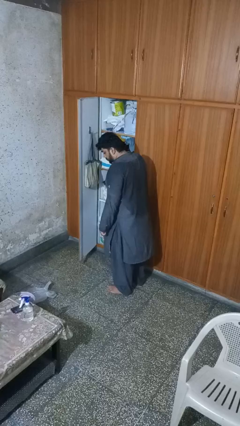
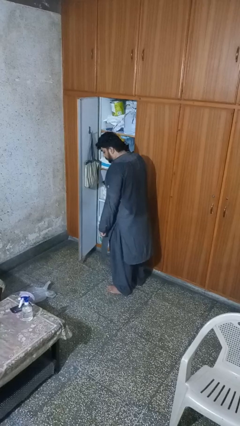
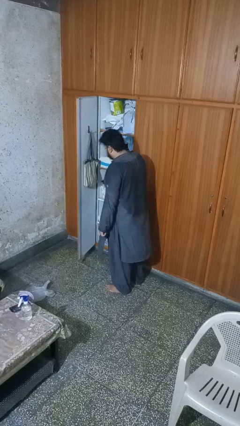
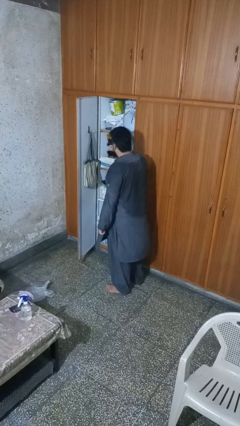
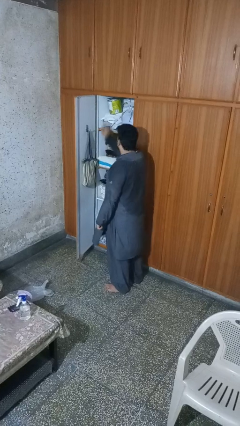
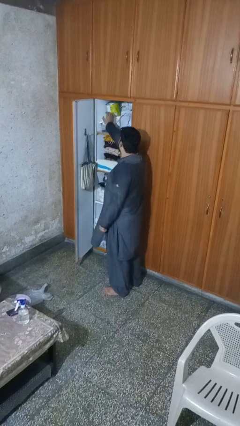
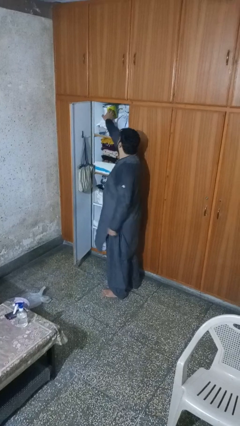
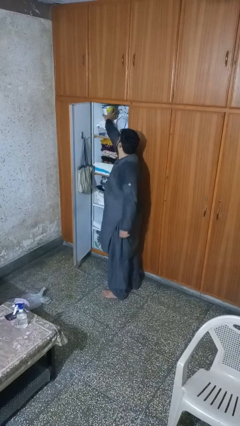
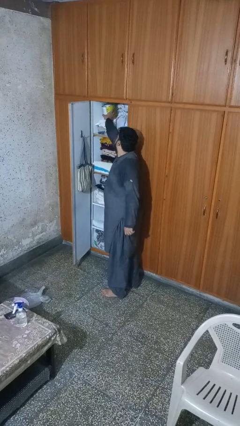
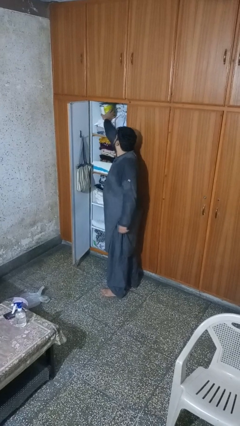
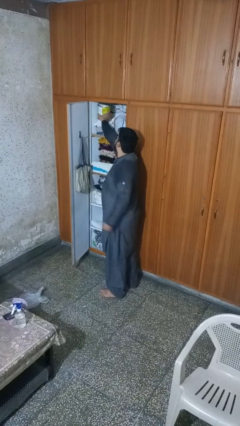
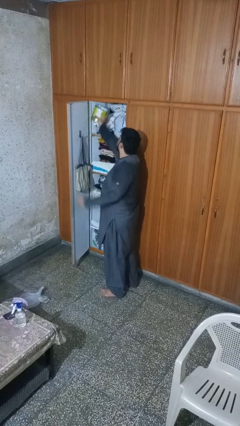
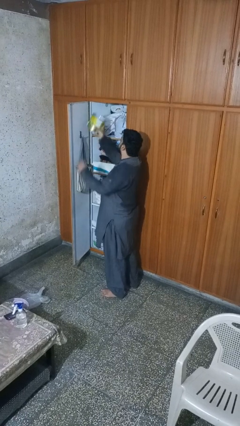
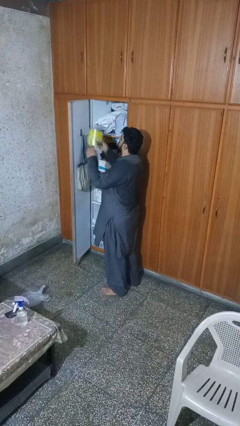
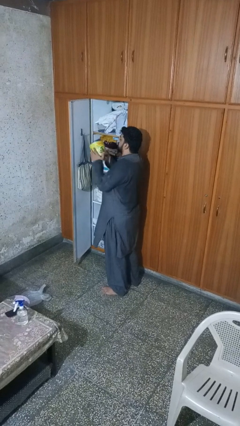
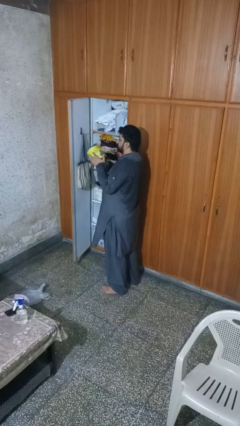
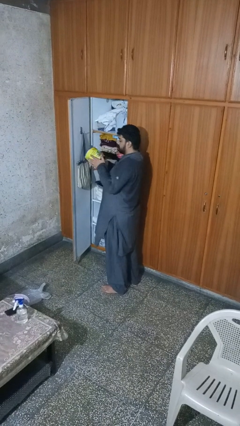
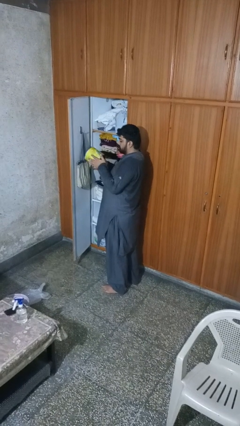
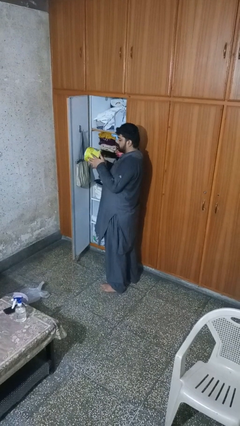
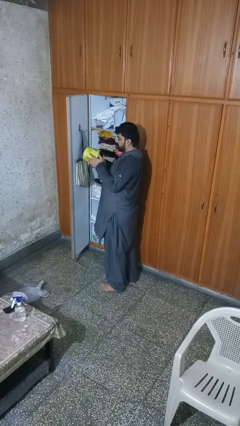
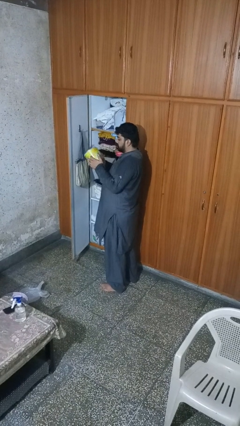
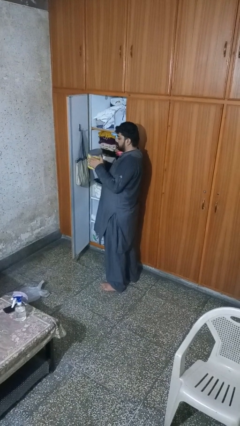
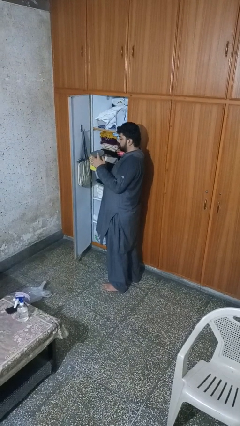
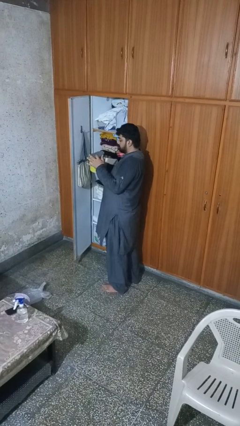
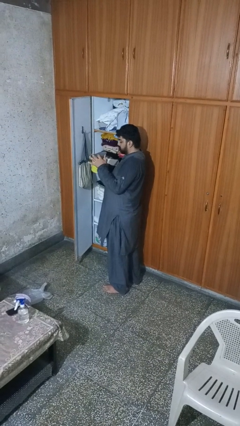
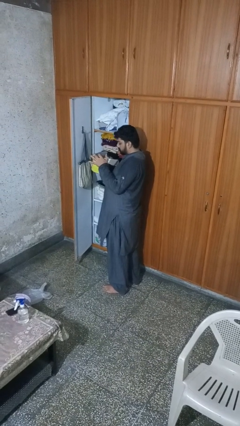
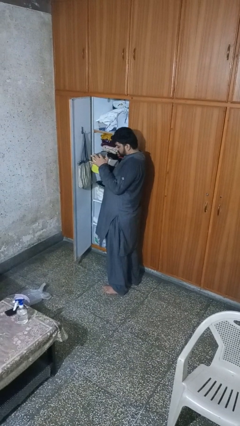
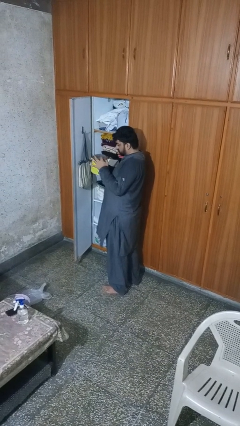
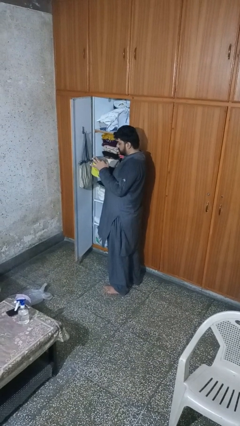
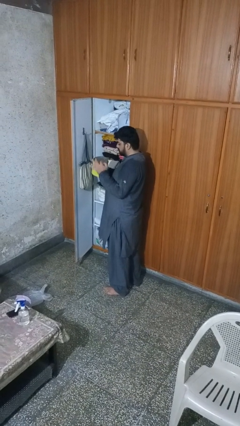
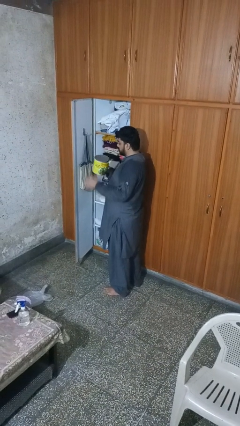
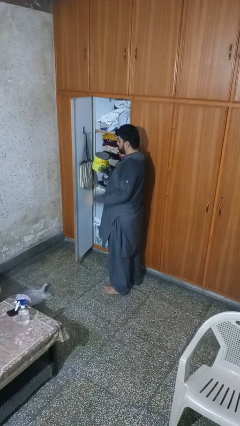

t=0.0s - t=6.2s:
person picks up object from shelf

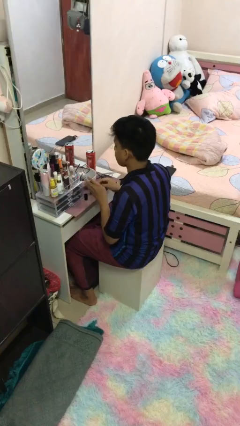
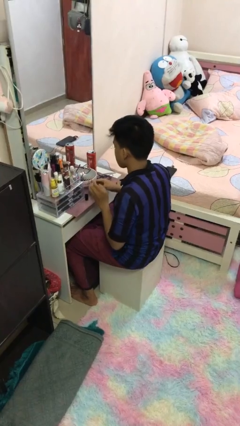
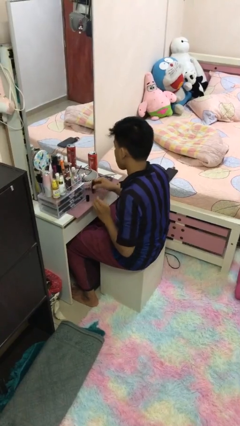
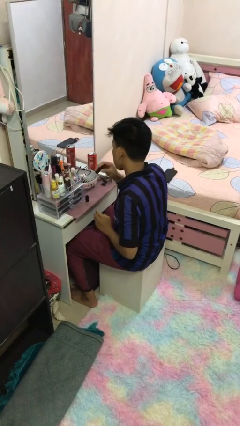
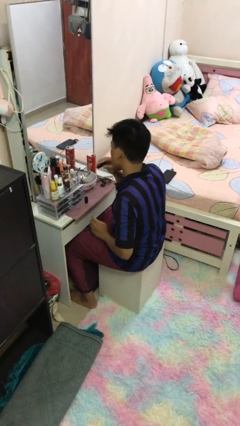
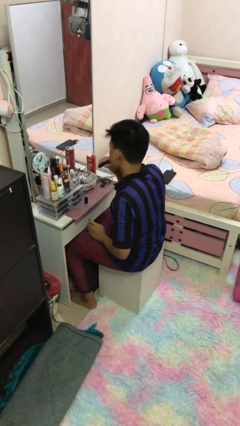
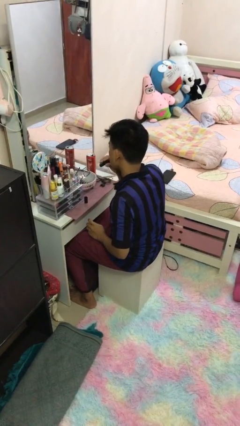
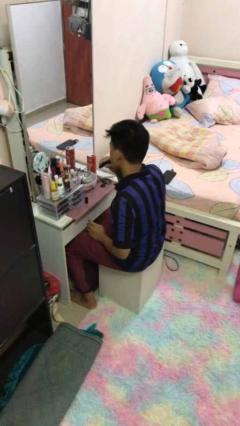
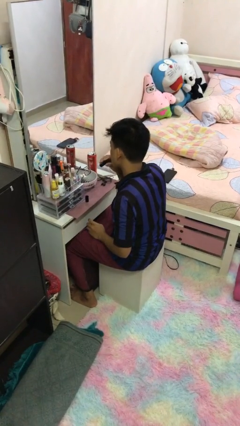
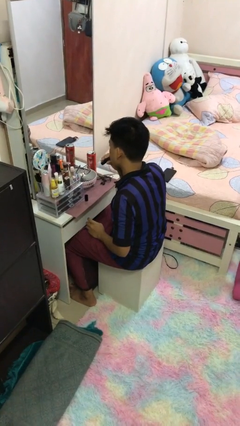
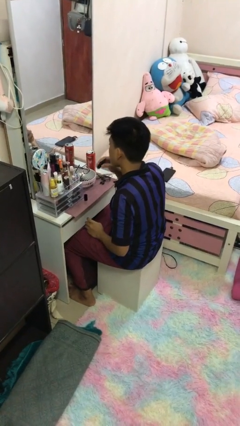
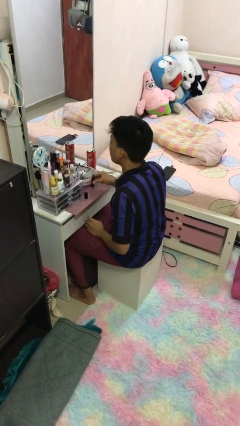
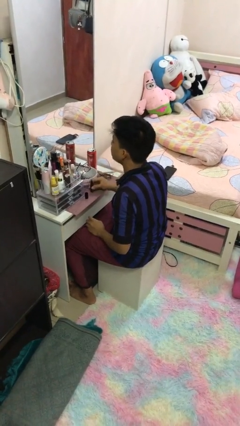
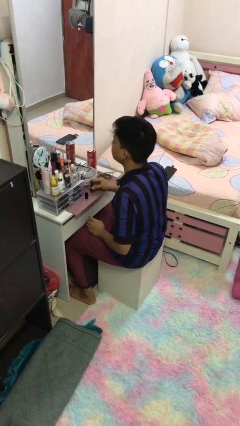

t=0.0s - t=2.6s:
person applies lip makeup

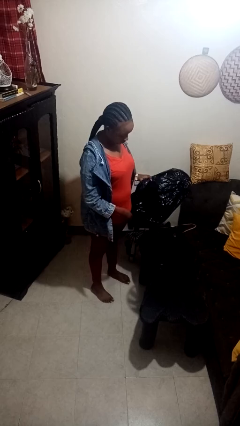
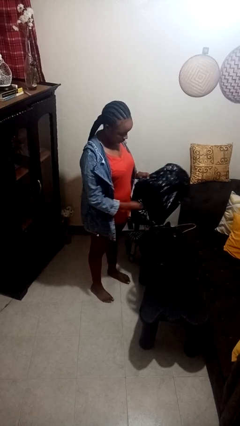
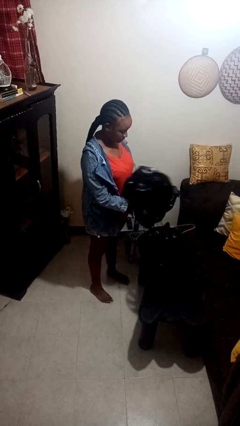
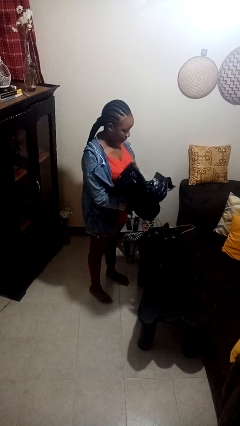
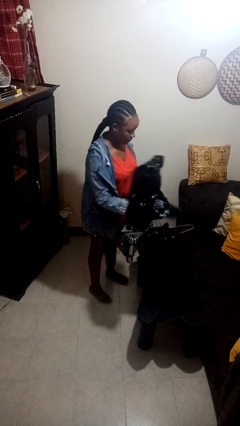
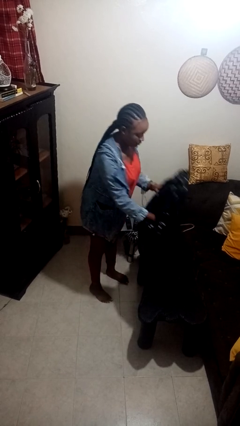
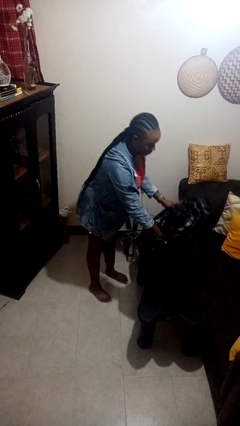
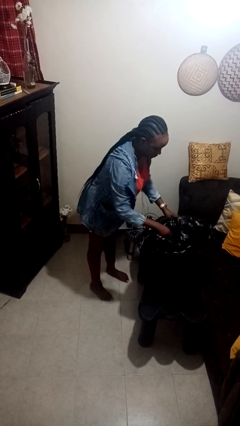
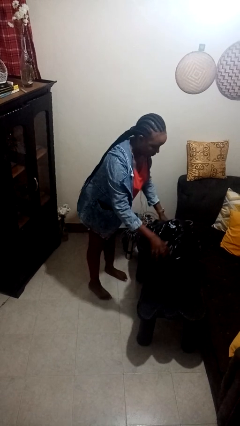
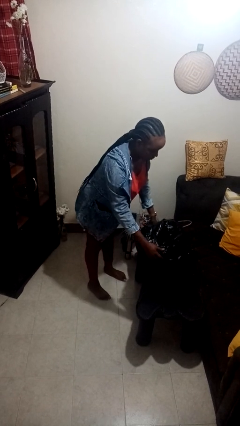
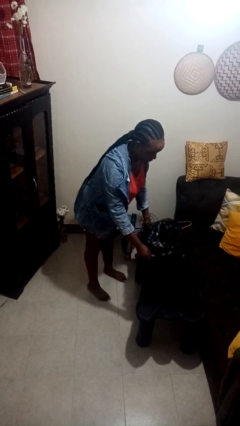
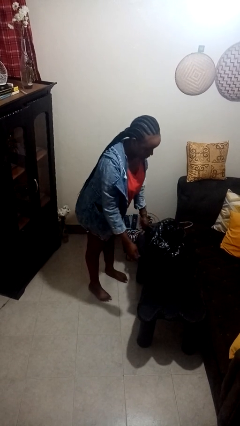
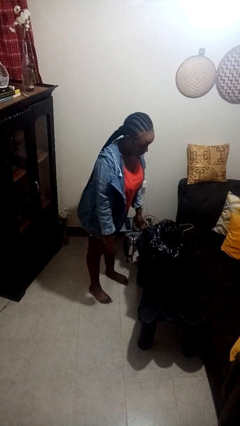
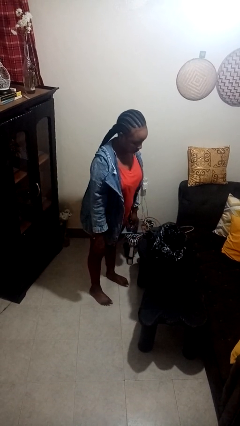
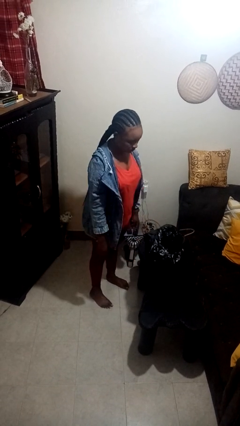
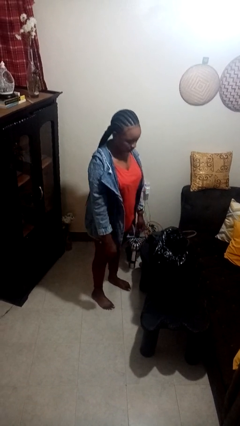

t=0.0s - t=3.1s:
person inserts trashbag into trashcan

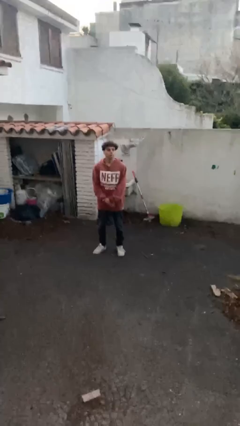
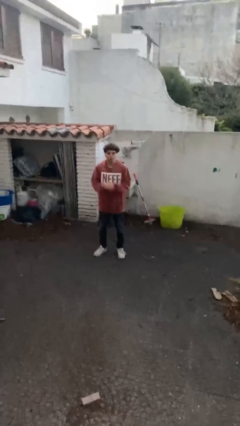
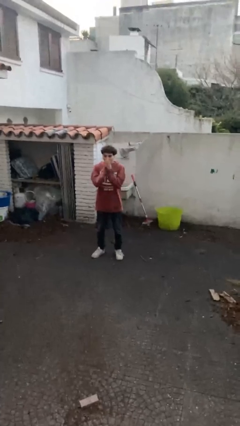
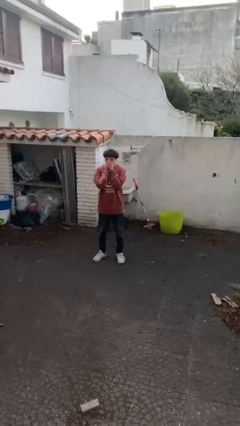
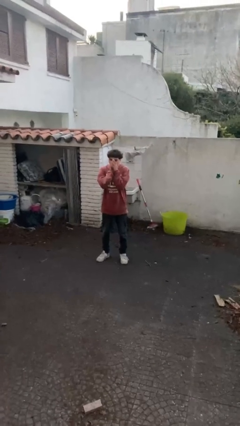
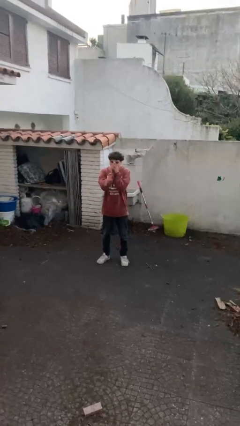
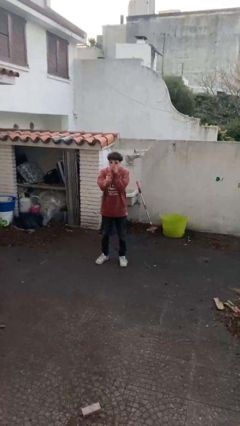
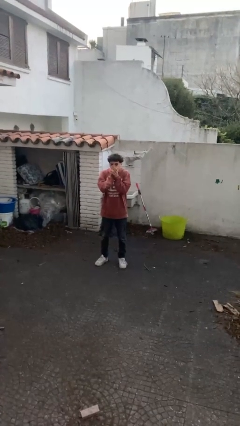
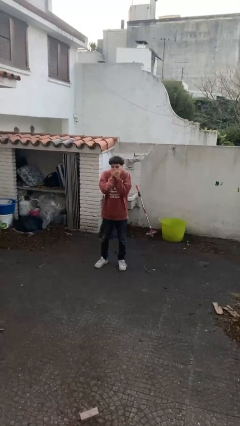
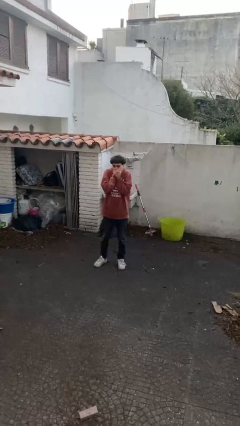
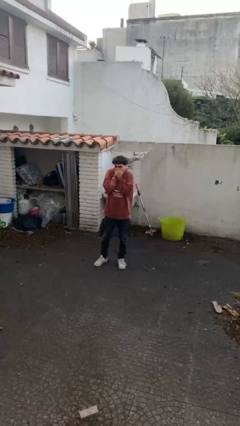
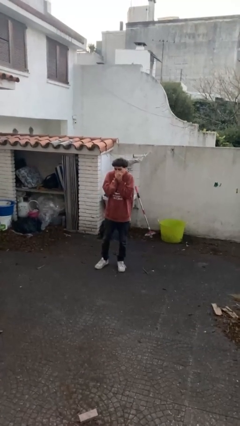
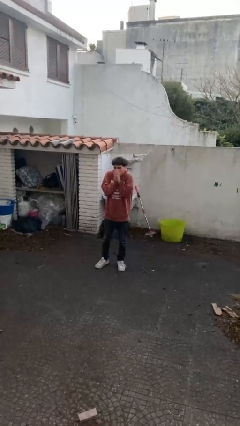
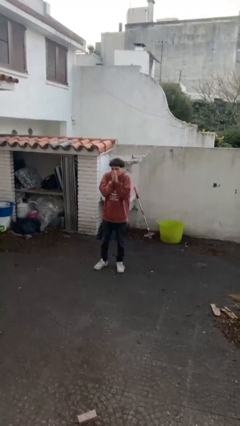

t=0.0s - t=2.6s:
person blows into hands

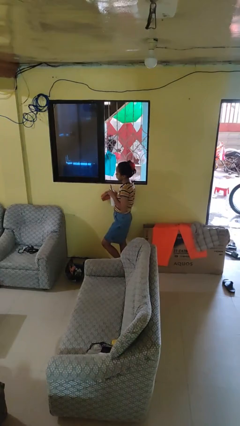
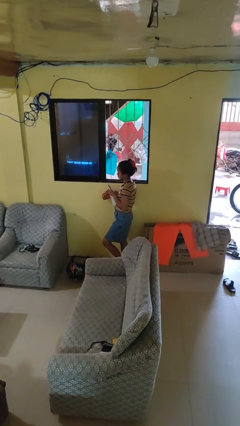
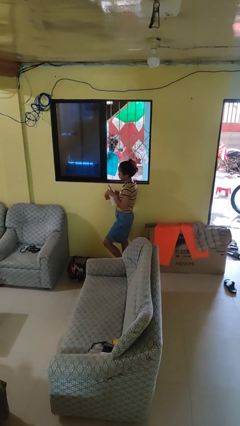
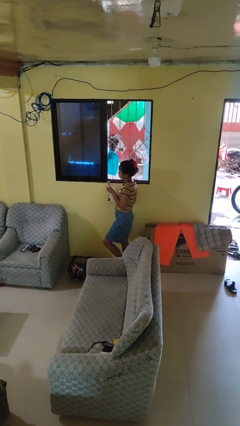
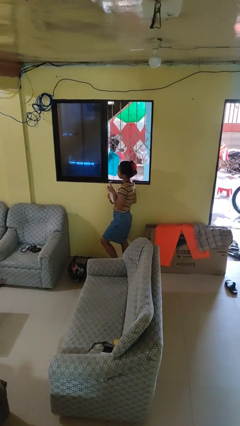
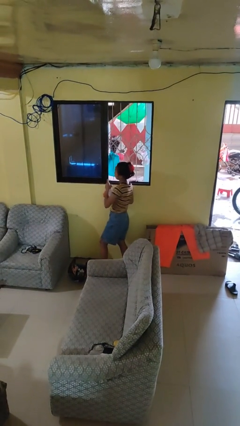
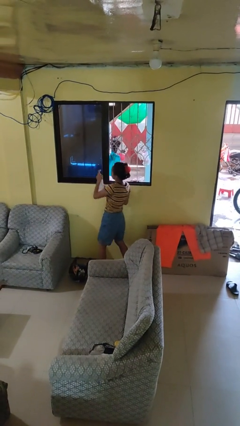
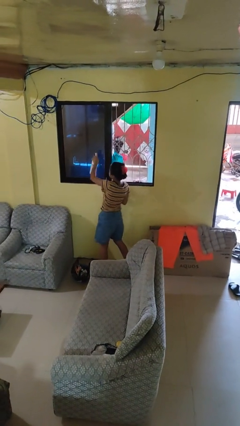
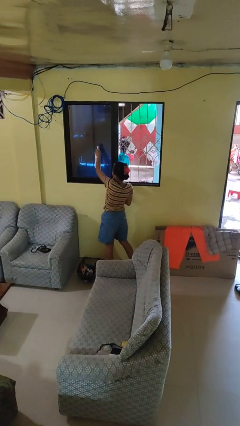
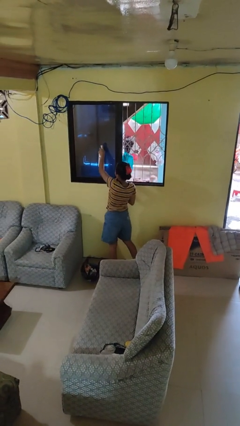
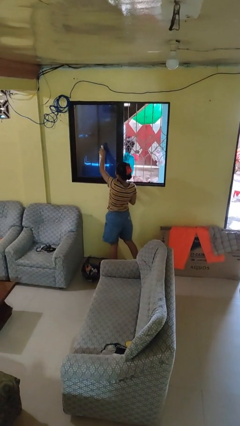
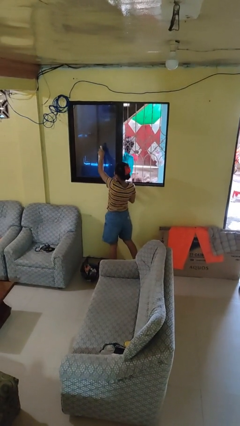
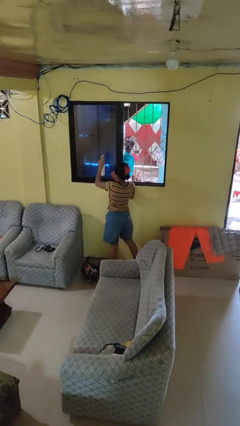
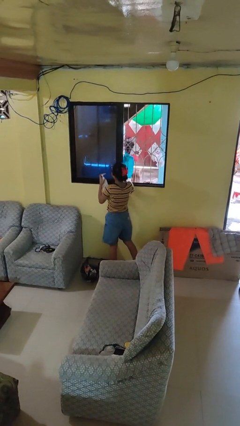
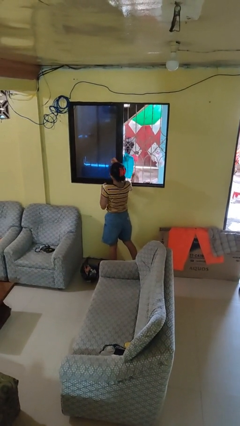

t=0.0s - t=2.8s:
person sprays from bottle
